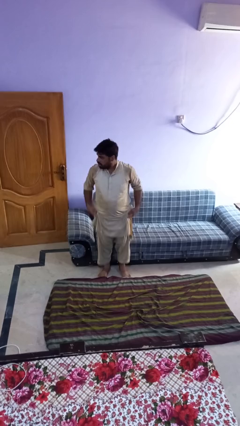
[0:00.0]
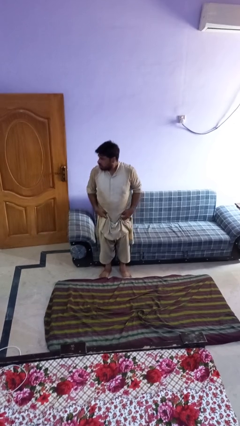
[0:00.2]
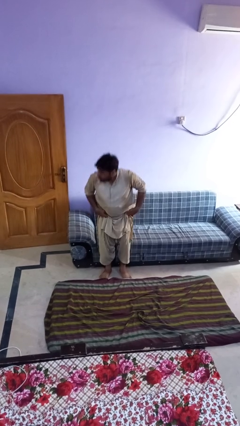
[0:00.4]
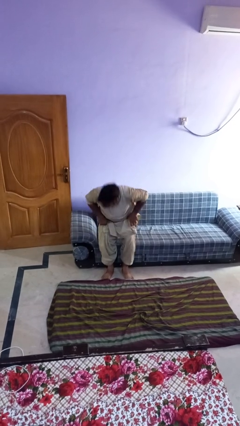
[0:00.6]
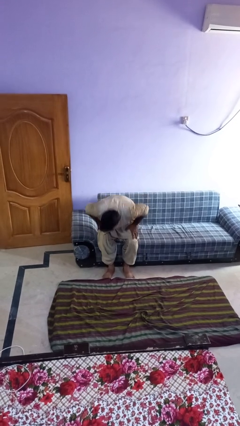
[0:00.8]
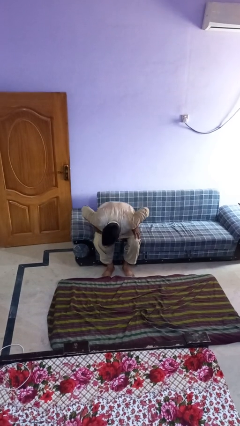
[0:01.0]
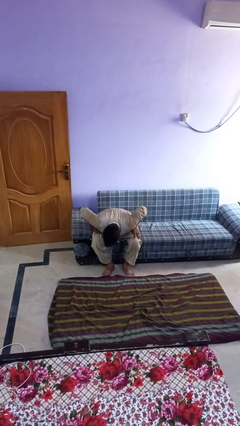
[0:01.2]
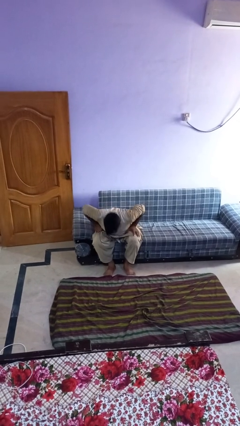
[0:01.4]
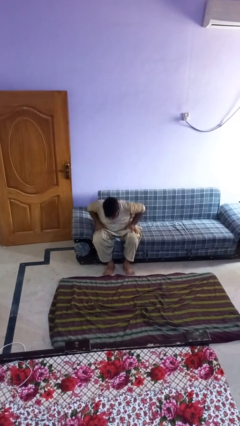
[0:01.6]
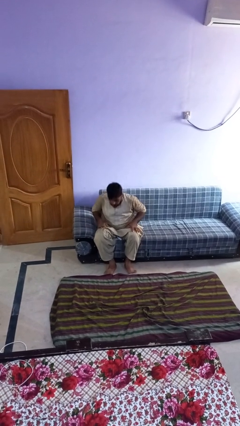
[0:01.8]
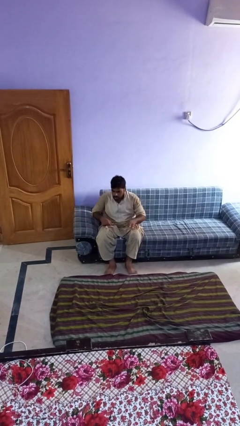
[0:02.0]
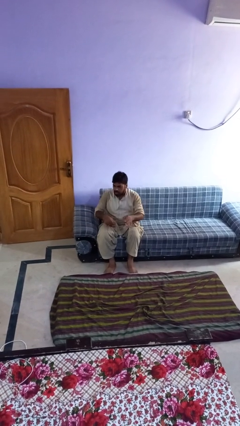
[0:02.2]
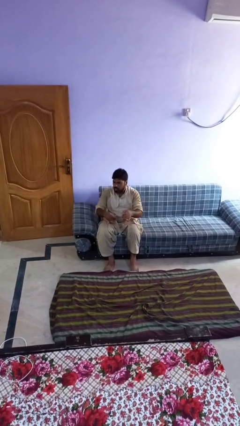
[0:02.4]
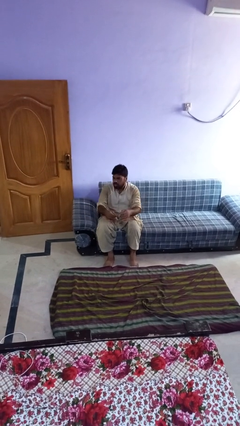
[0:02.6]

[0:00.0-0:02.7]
person sits down
